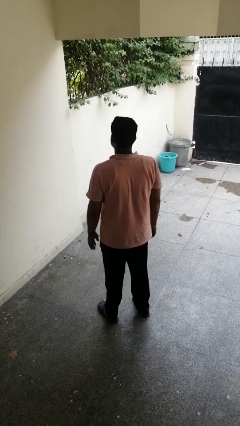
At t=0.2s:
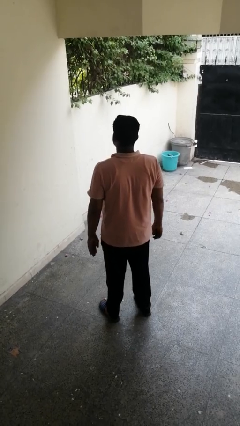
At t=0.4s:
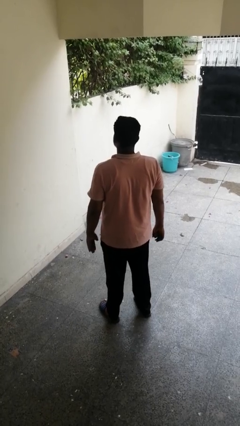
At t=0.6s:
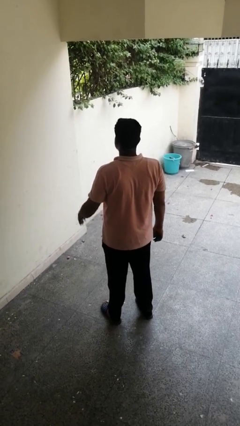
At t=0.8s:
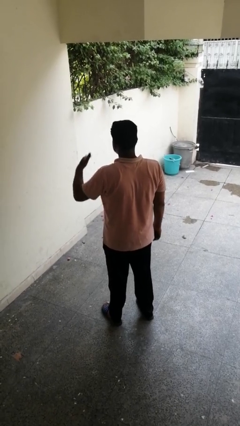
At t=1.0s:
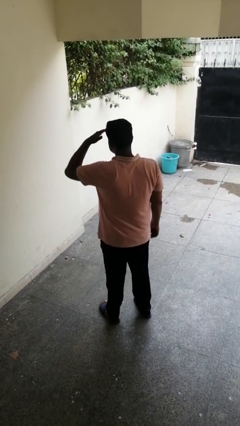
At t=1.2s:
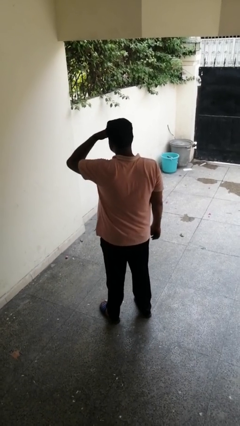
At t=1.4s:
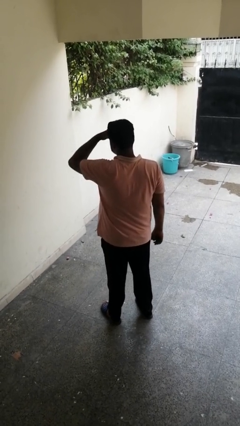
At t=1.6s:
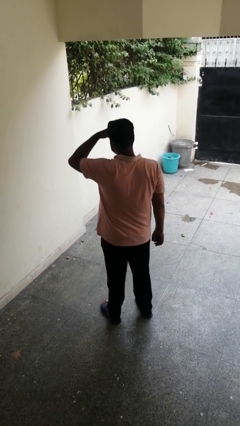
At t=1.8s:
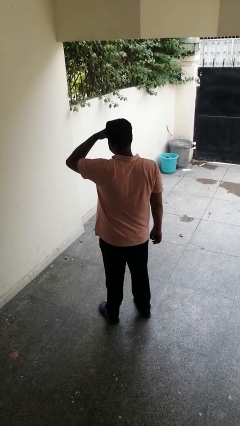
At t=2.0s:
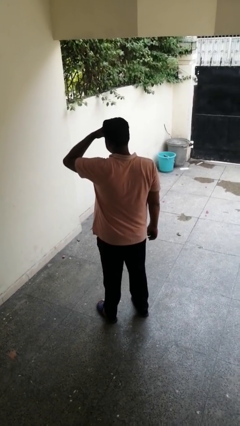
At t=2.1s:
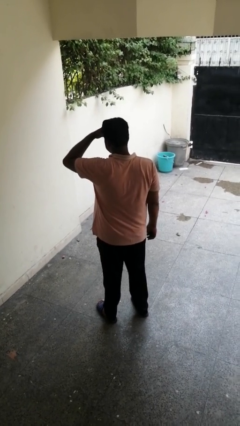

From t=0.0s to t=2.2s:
person shades eyes

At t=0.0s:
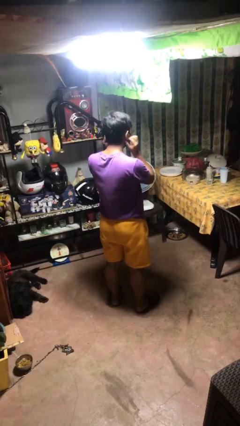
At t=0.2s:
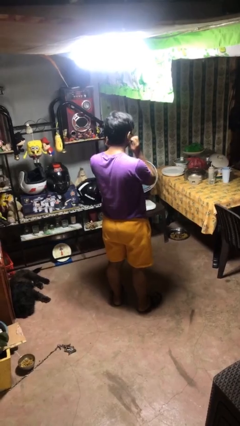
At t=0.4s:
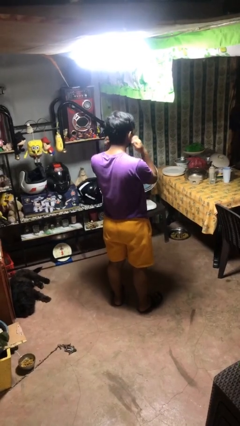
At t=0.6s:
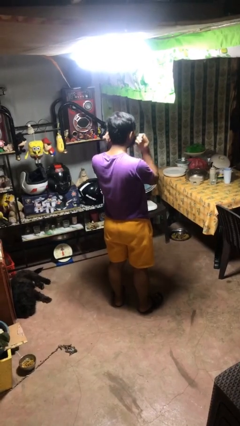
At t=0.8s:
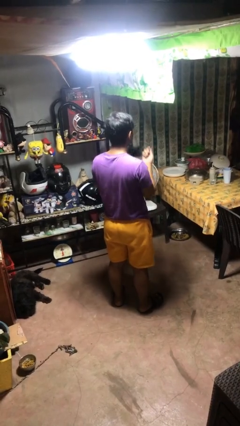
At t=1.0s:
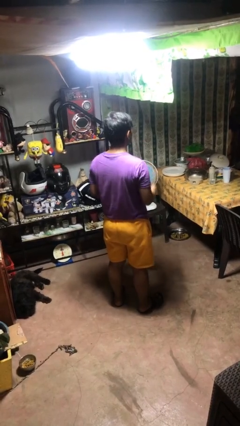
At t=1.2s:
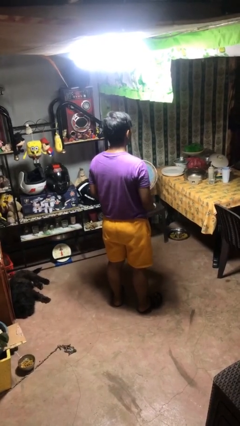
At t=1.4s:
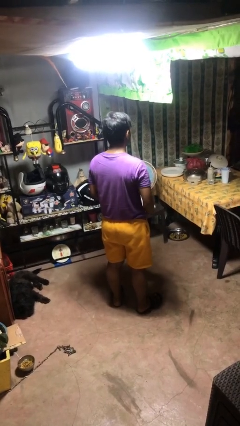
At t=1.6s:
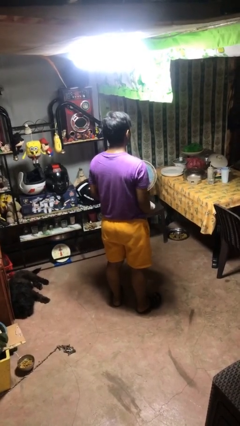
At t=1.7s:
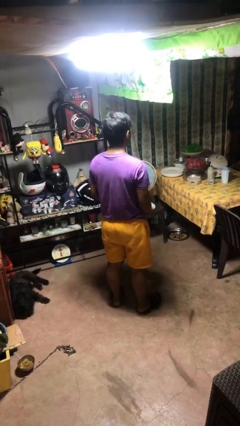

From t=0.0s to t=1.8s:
person takes off facemask

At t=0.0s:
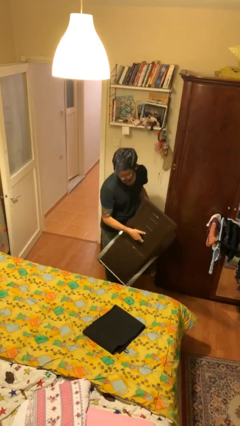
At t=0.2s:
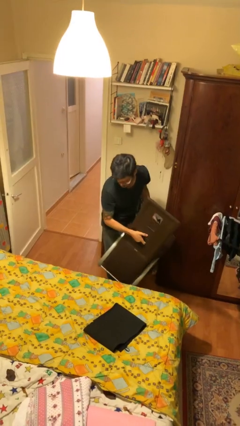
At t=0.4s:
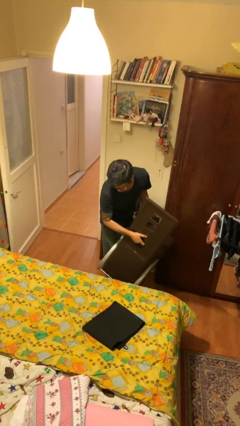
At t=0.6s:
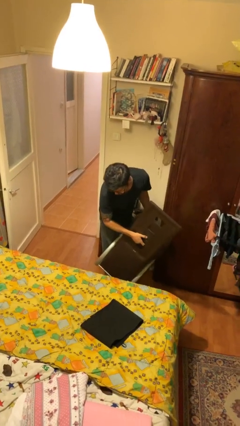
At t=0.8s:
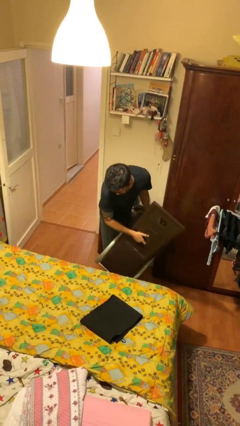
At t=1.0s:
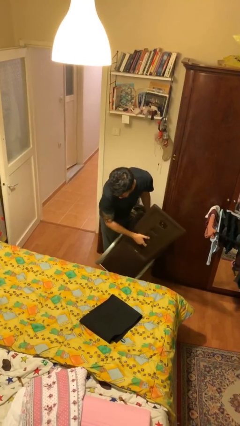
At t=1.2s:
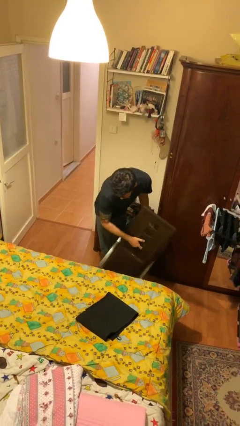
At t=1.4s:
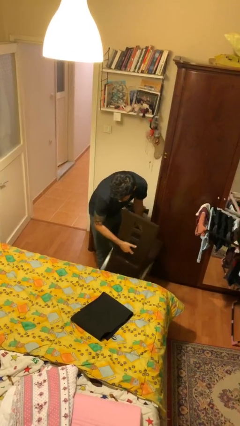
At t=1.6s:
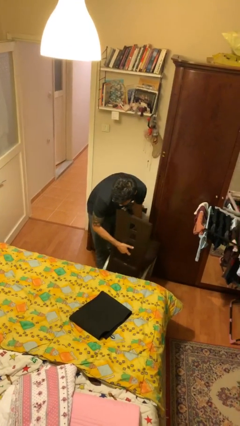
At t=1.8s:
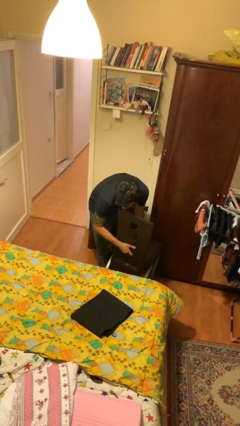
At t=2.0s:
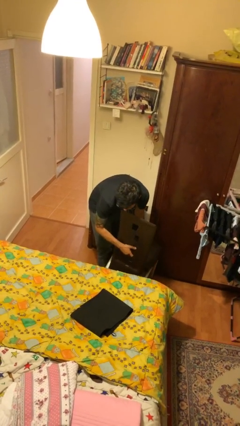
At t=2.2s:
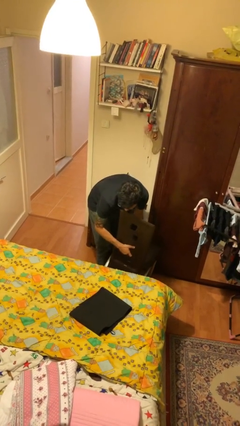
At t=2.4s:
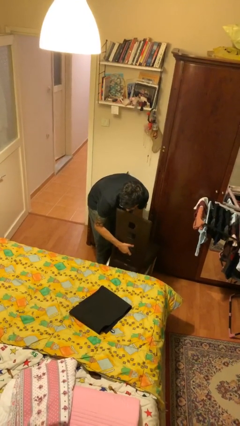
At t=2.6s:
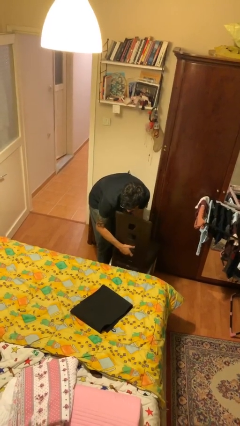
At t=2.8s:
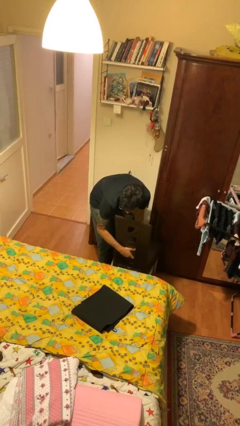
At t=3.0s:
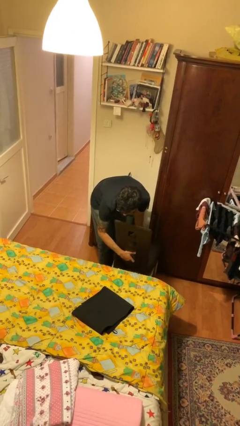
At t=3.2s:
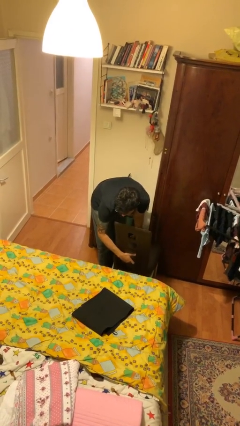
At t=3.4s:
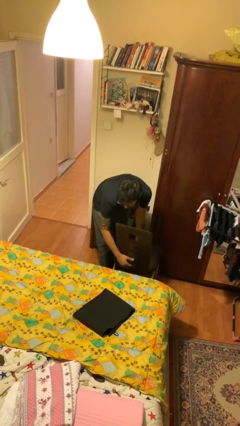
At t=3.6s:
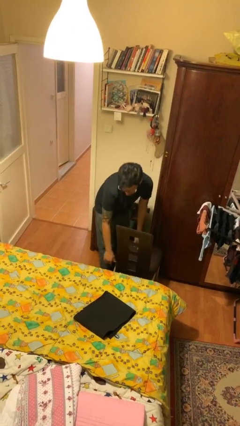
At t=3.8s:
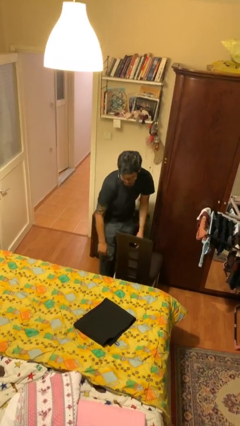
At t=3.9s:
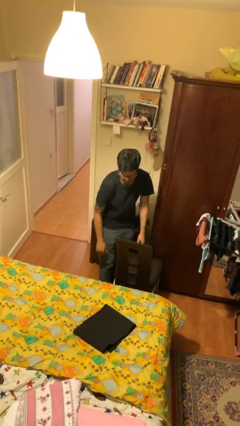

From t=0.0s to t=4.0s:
person puts down object on floor

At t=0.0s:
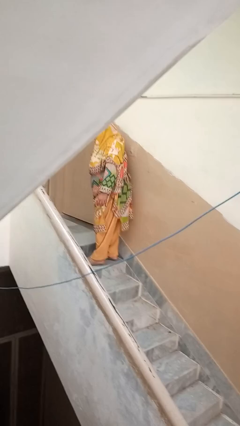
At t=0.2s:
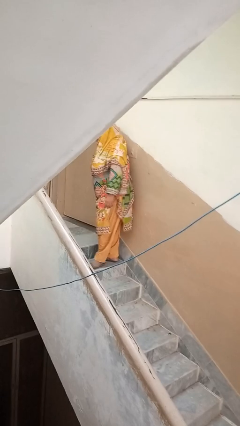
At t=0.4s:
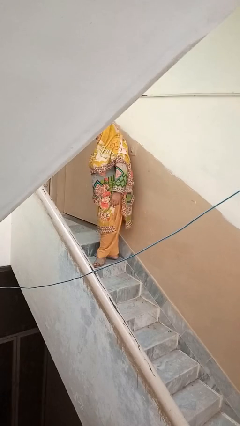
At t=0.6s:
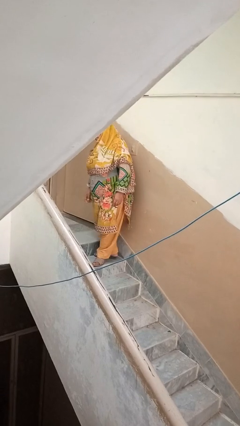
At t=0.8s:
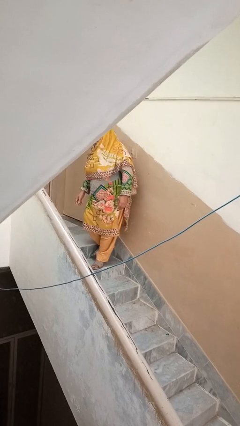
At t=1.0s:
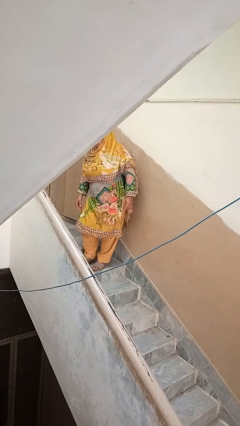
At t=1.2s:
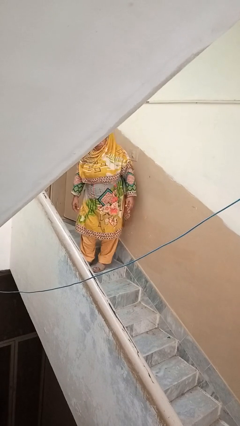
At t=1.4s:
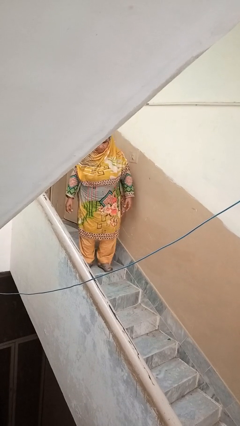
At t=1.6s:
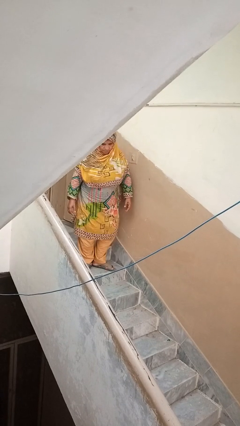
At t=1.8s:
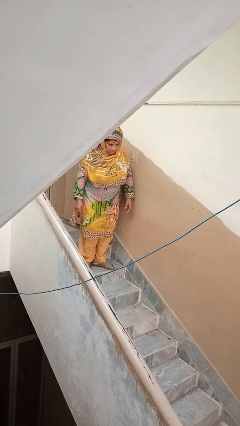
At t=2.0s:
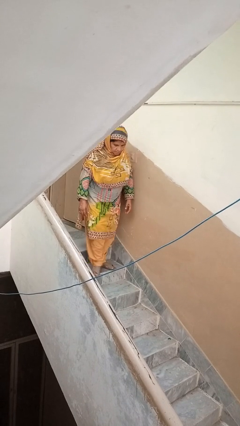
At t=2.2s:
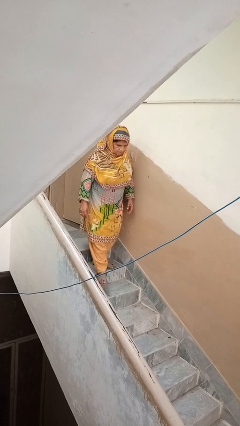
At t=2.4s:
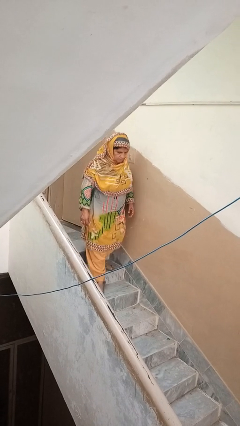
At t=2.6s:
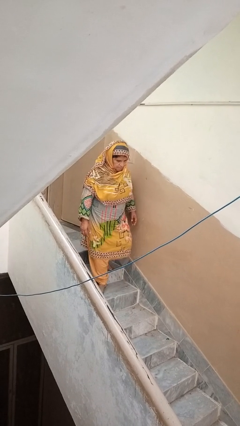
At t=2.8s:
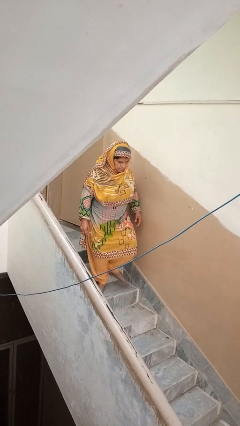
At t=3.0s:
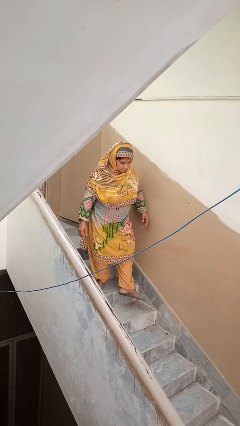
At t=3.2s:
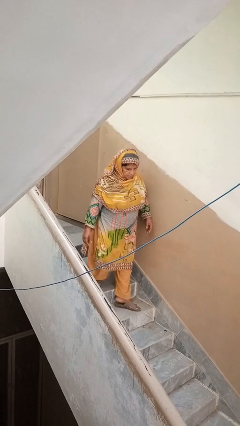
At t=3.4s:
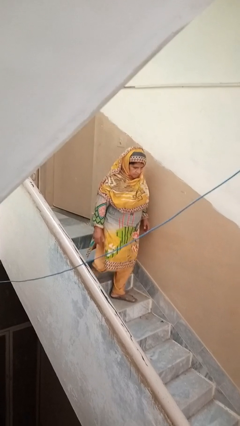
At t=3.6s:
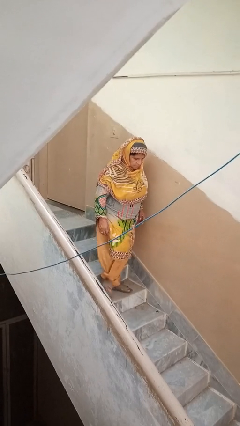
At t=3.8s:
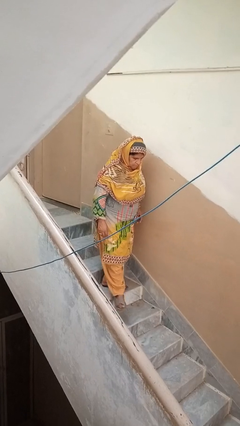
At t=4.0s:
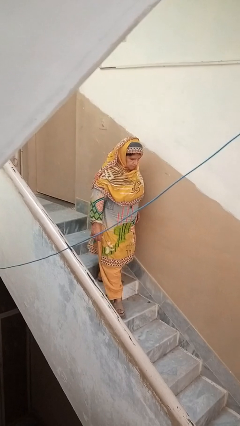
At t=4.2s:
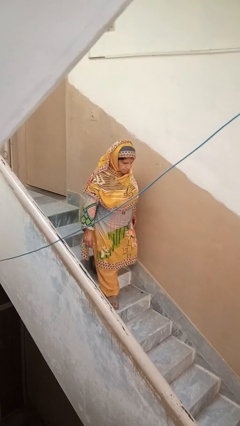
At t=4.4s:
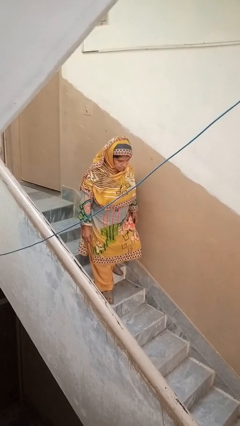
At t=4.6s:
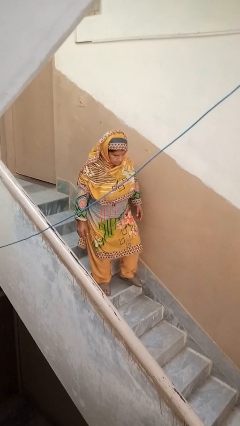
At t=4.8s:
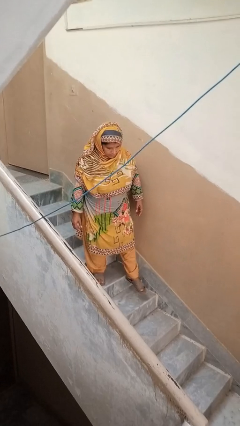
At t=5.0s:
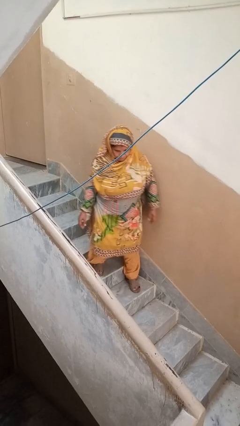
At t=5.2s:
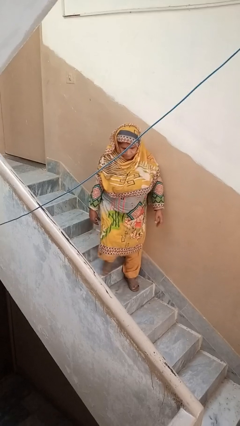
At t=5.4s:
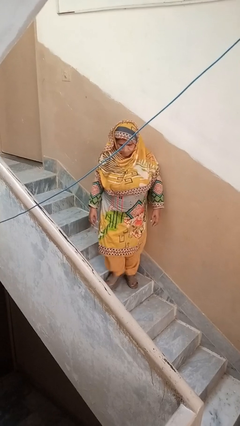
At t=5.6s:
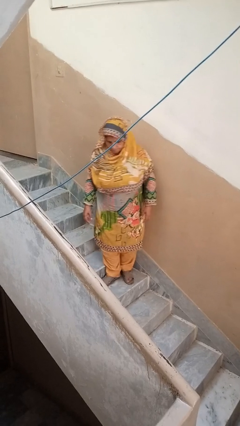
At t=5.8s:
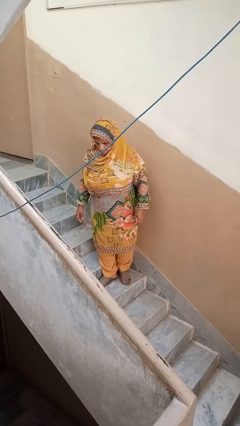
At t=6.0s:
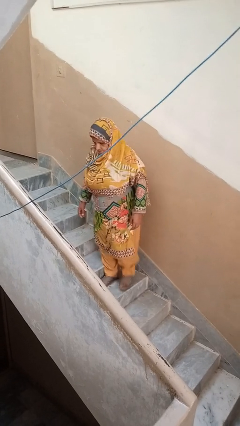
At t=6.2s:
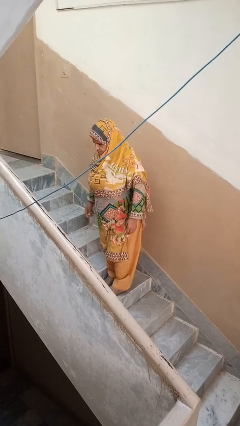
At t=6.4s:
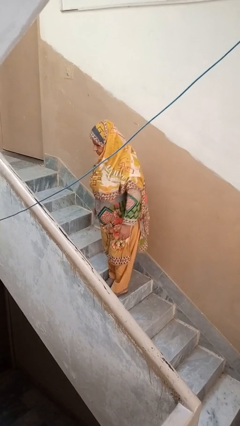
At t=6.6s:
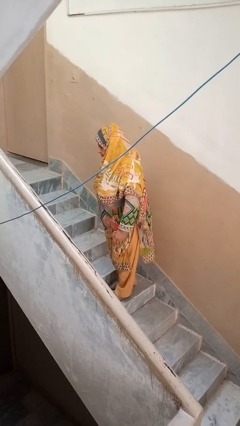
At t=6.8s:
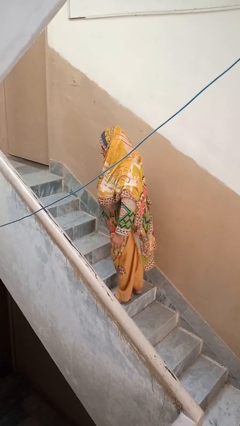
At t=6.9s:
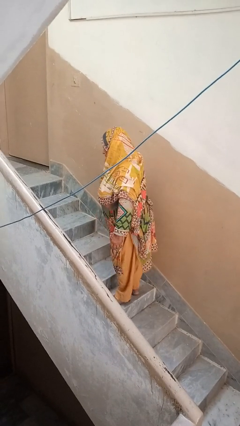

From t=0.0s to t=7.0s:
person climbs down stairs

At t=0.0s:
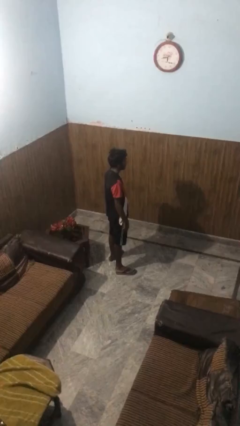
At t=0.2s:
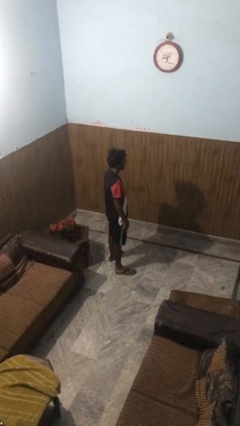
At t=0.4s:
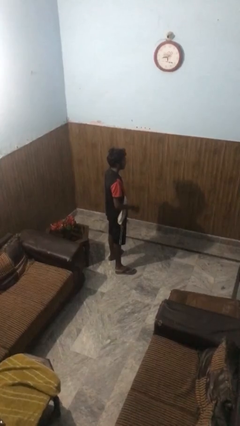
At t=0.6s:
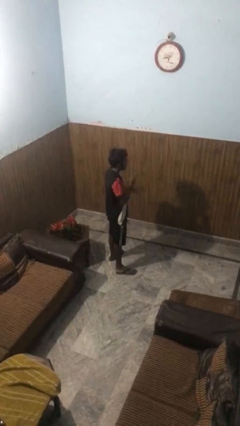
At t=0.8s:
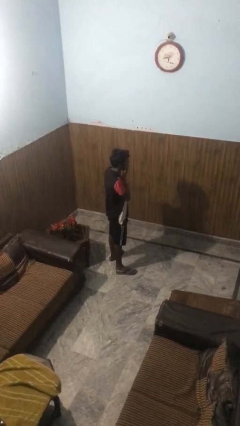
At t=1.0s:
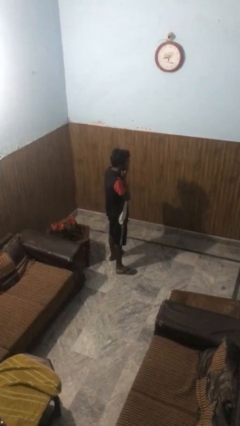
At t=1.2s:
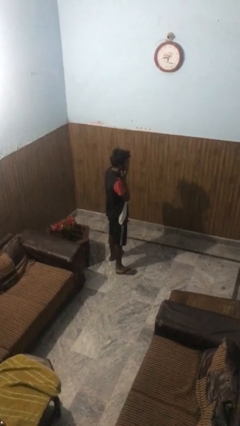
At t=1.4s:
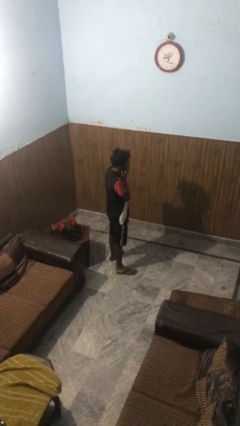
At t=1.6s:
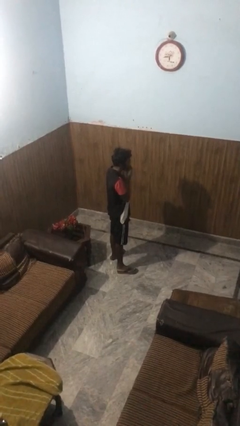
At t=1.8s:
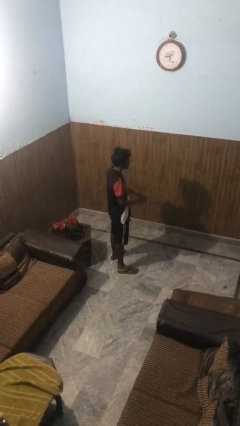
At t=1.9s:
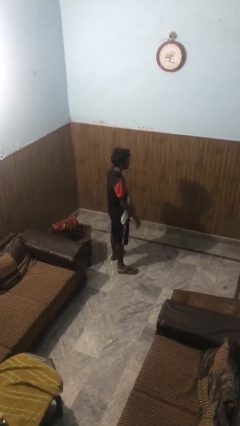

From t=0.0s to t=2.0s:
person covers face with hands
